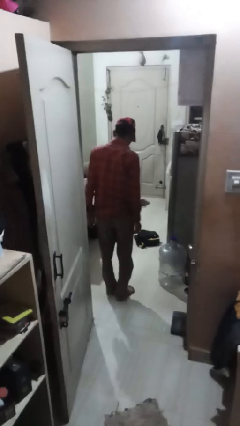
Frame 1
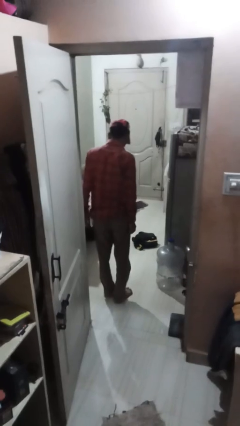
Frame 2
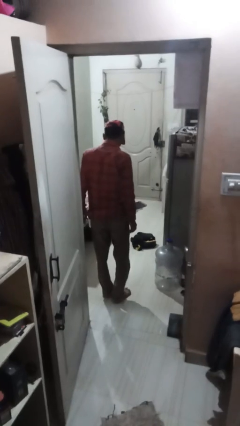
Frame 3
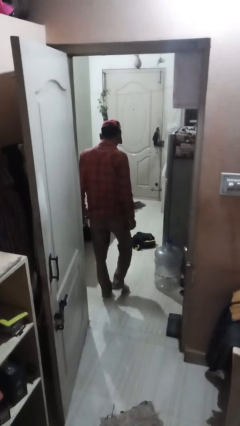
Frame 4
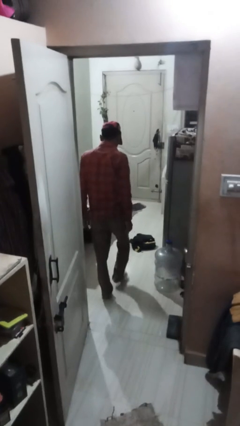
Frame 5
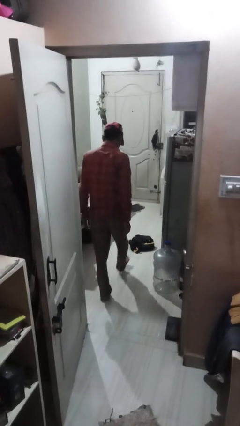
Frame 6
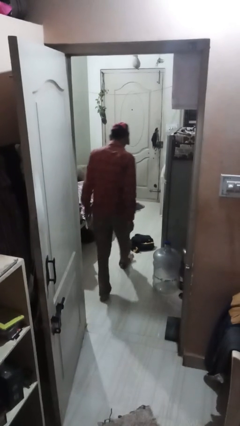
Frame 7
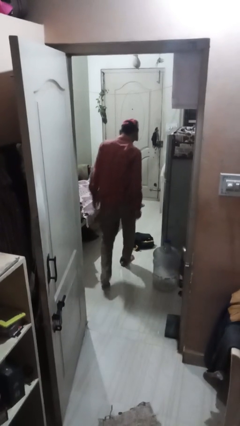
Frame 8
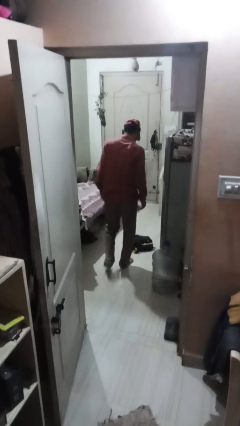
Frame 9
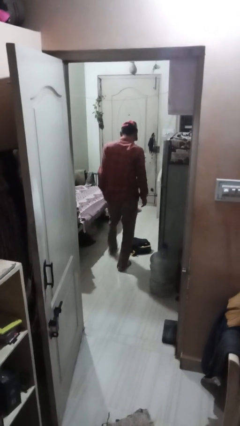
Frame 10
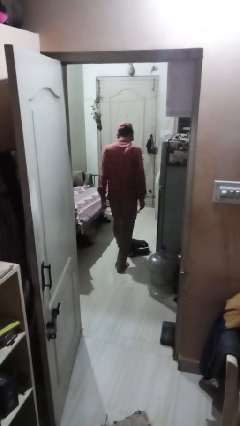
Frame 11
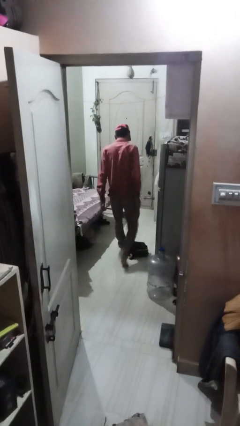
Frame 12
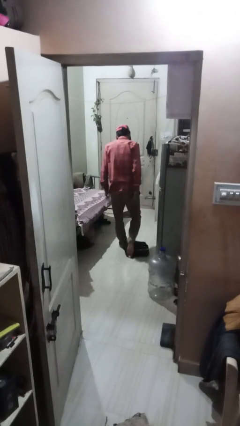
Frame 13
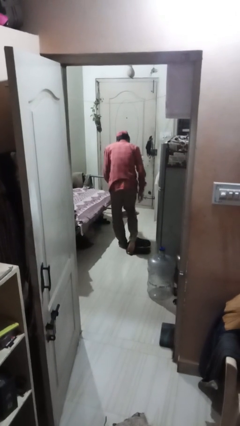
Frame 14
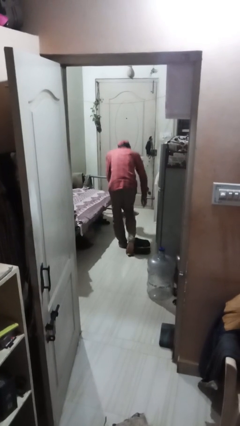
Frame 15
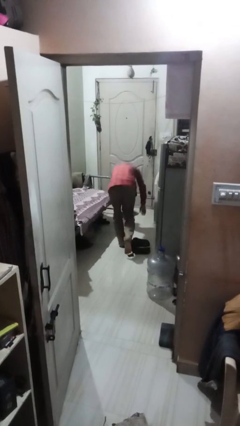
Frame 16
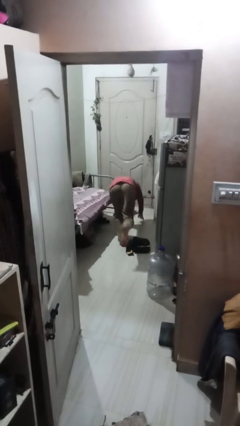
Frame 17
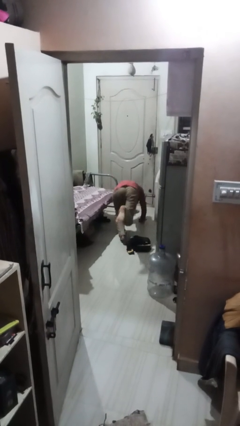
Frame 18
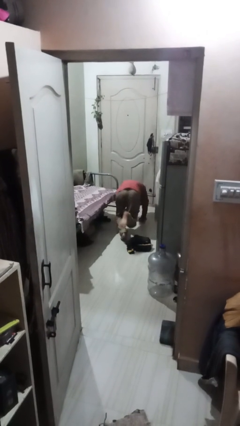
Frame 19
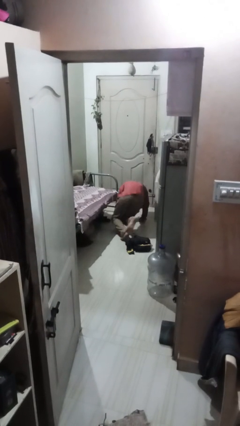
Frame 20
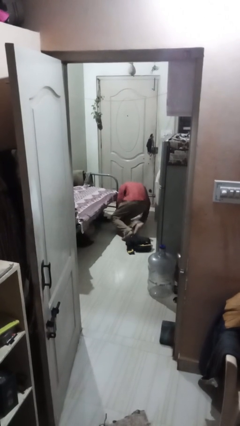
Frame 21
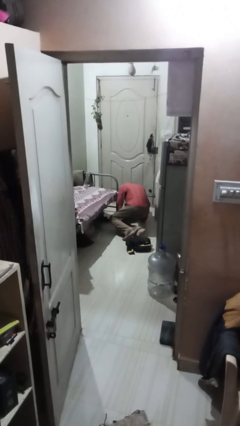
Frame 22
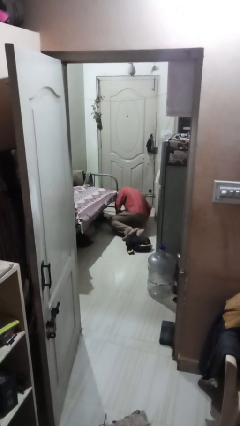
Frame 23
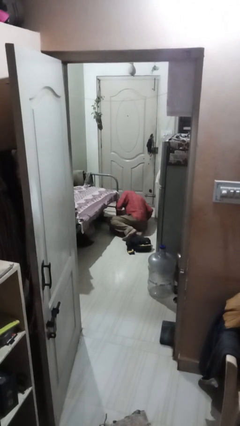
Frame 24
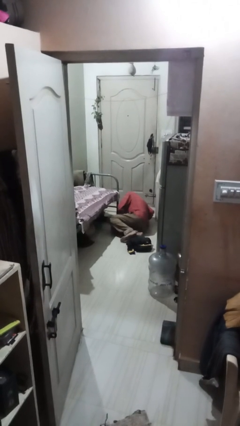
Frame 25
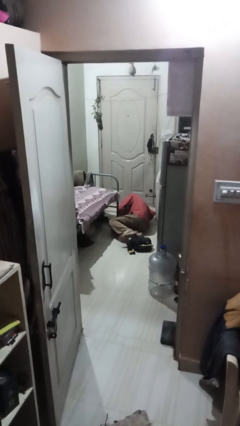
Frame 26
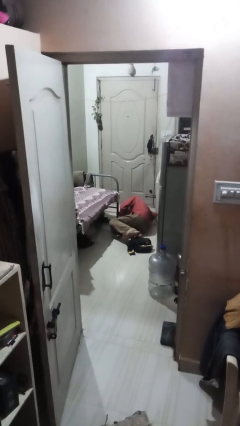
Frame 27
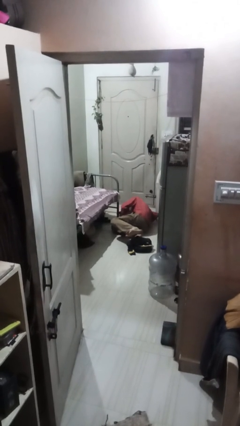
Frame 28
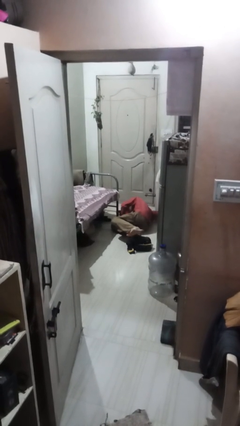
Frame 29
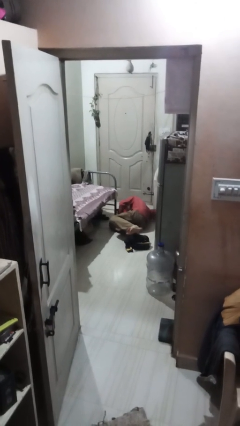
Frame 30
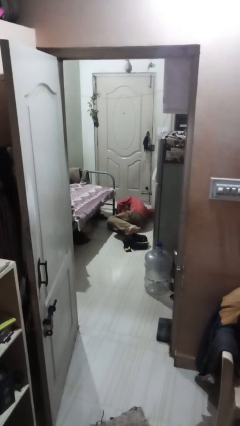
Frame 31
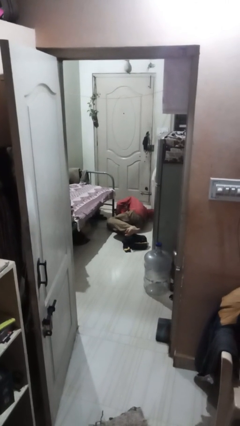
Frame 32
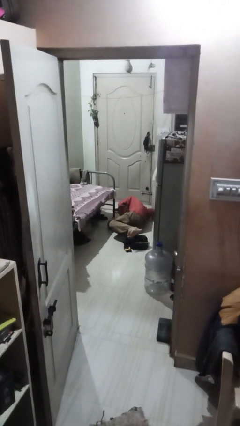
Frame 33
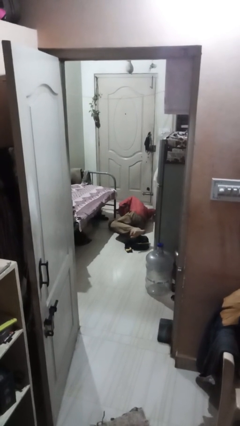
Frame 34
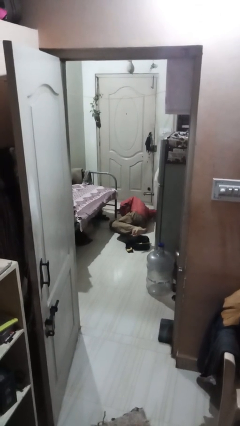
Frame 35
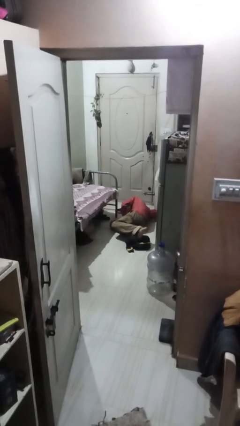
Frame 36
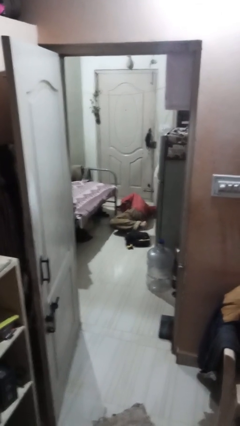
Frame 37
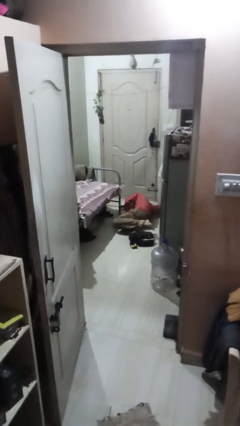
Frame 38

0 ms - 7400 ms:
person trips on object on floor

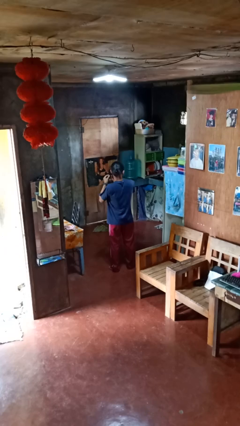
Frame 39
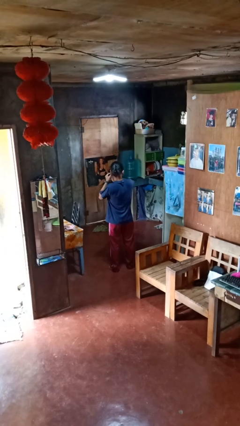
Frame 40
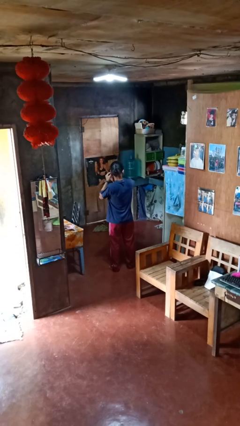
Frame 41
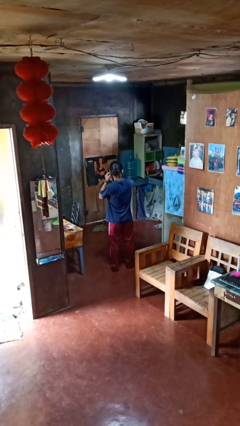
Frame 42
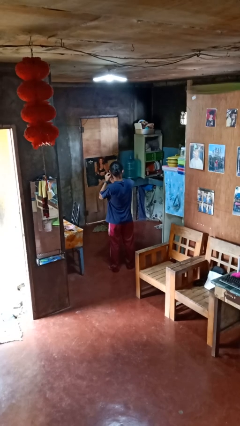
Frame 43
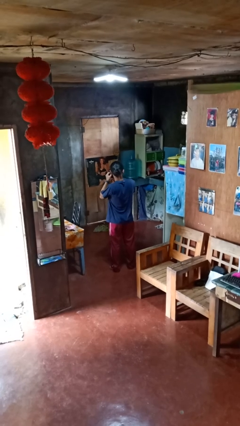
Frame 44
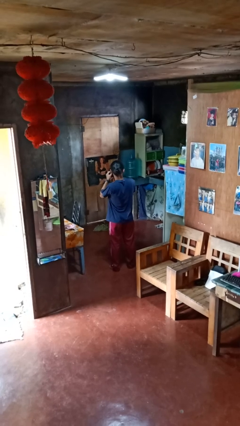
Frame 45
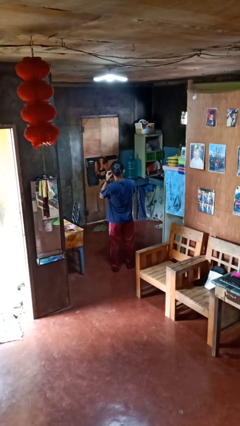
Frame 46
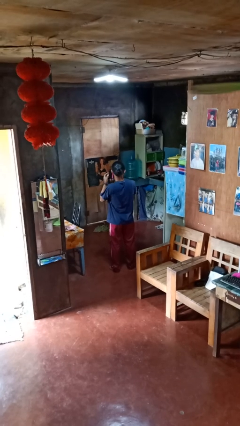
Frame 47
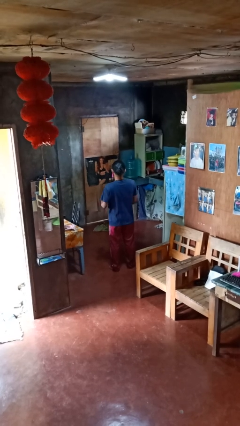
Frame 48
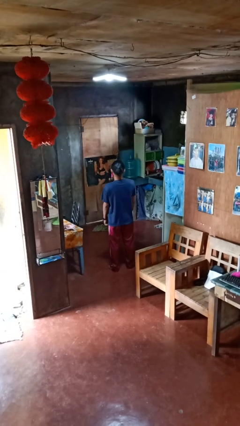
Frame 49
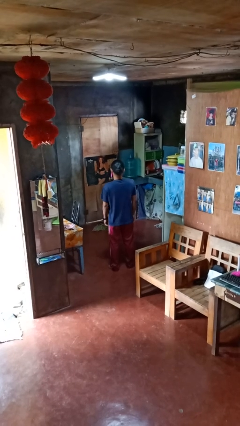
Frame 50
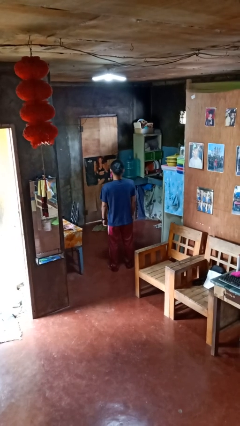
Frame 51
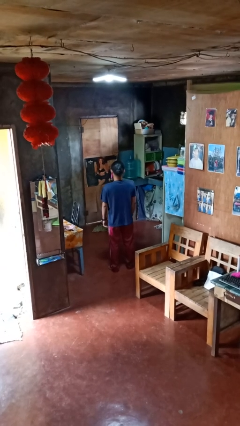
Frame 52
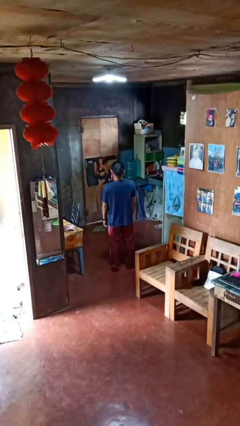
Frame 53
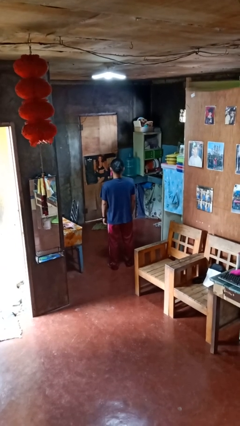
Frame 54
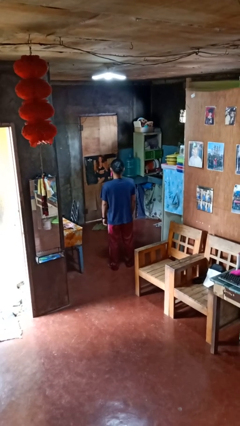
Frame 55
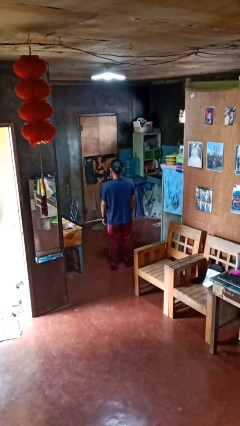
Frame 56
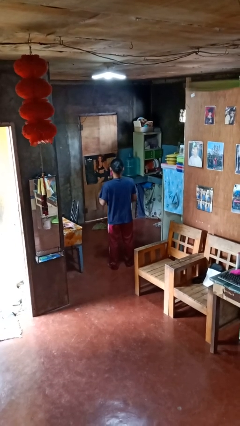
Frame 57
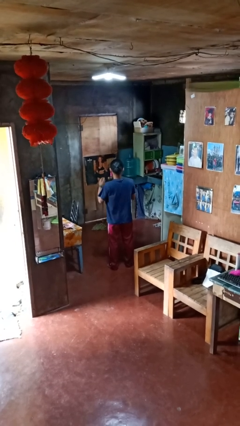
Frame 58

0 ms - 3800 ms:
person puts on earrings

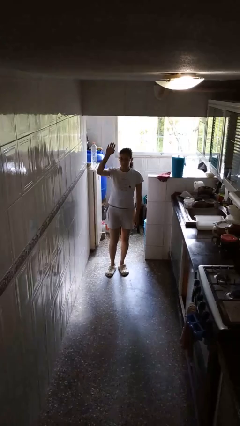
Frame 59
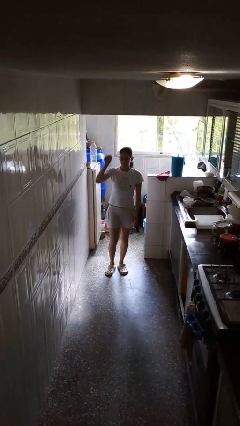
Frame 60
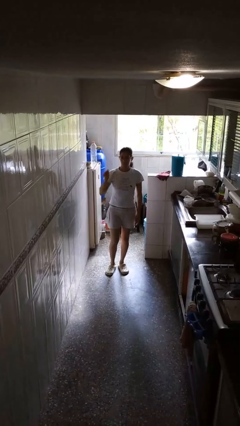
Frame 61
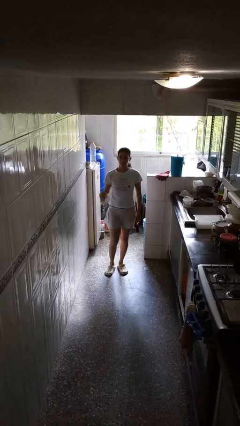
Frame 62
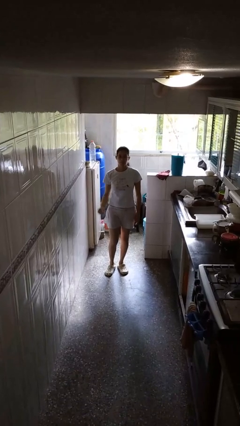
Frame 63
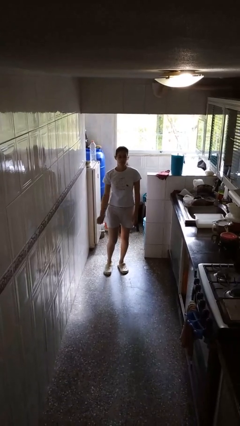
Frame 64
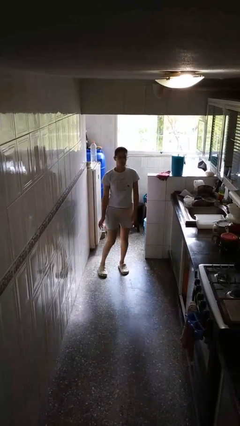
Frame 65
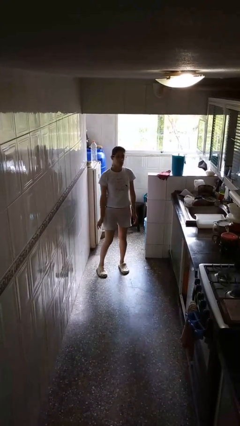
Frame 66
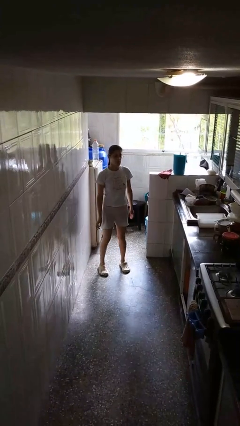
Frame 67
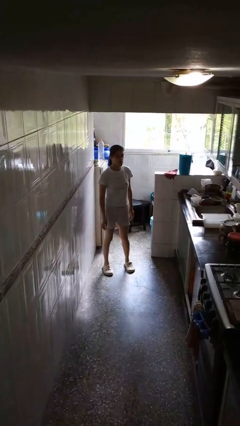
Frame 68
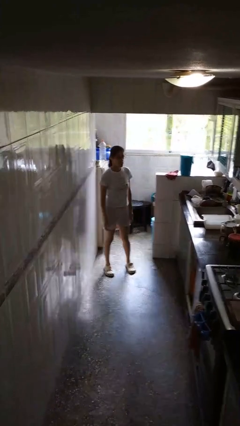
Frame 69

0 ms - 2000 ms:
person gestures lower hand

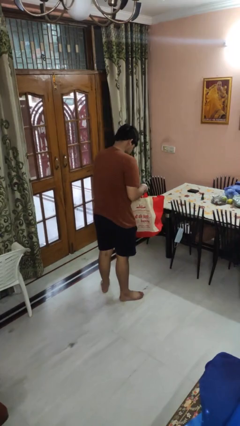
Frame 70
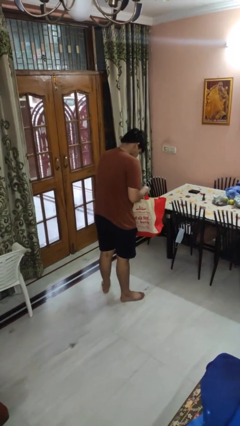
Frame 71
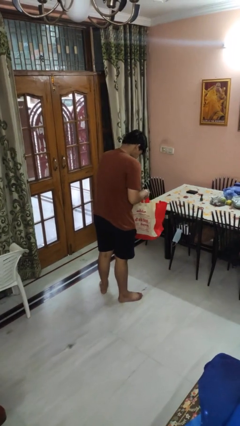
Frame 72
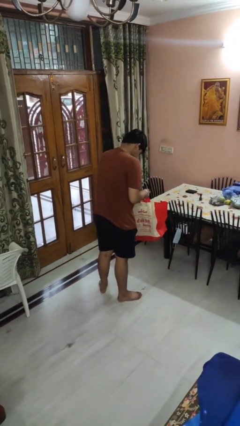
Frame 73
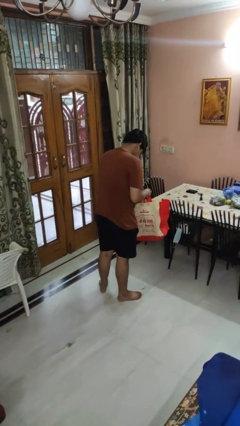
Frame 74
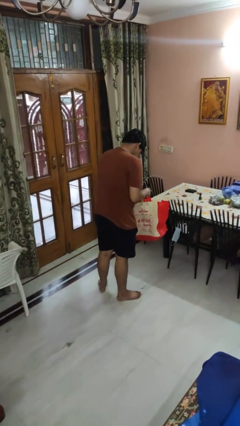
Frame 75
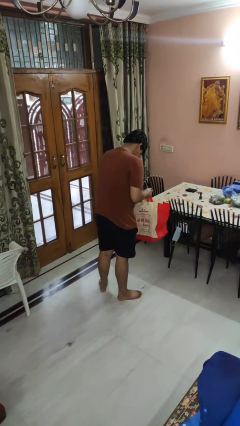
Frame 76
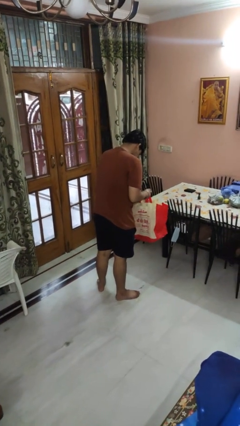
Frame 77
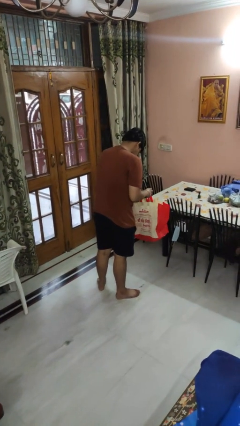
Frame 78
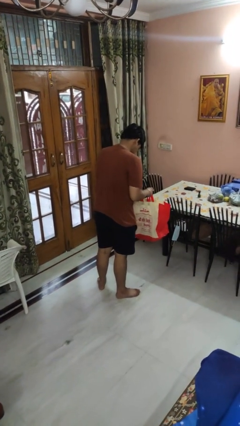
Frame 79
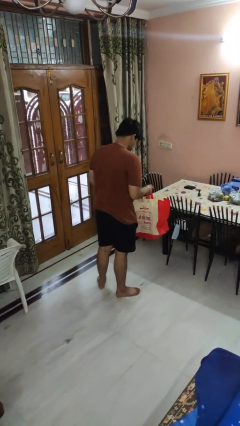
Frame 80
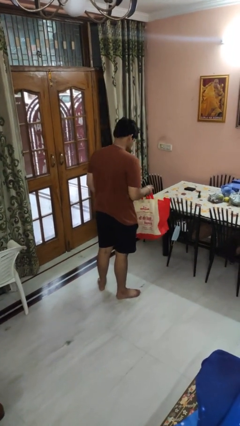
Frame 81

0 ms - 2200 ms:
person searches in bag

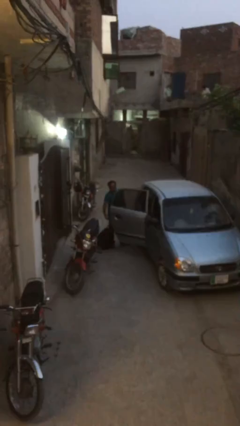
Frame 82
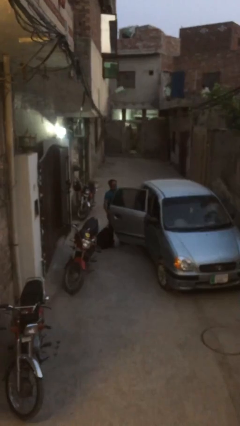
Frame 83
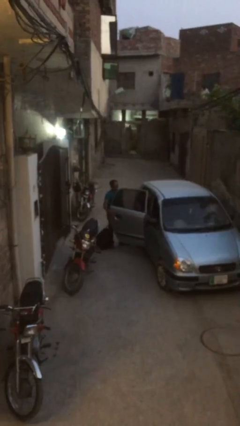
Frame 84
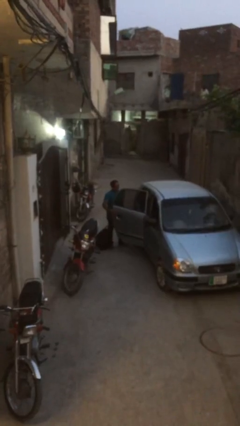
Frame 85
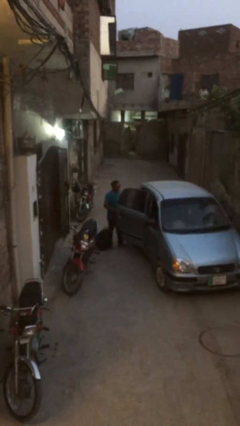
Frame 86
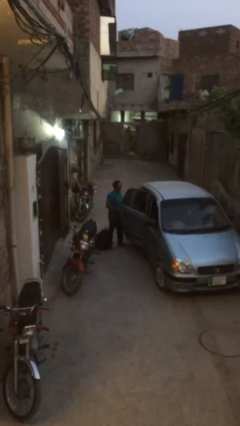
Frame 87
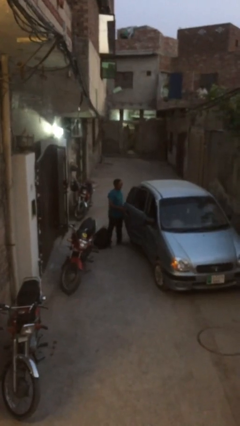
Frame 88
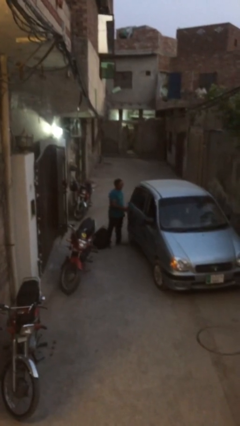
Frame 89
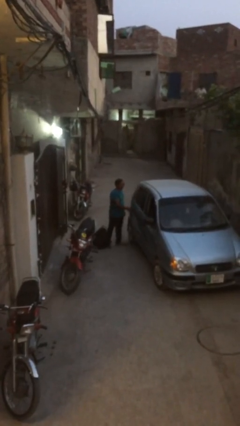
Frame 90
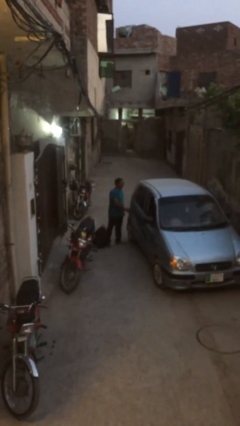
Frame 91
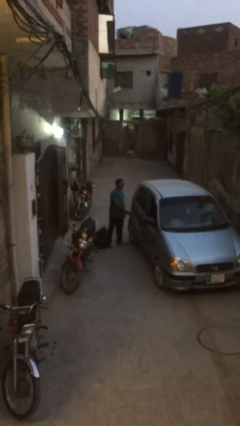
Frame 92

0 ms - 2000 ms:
person closes car door
